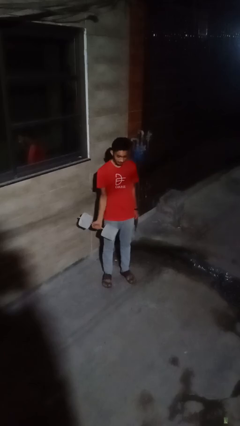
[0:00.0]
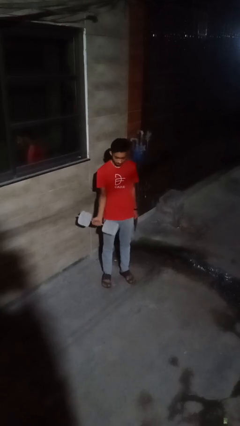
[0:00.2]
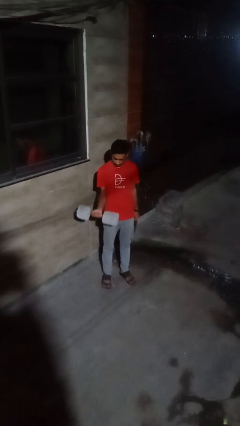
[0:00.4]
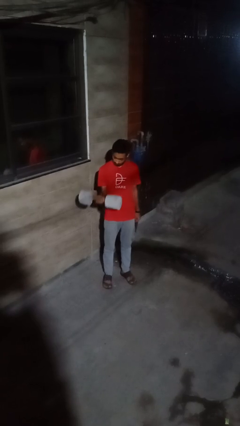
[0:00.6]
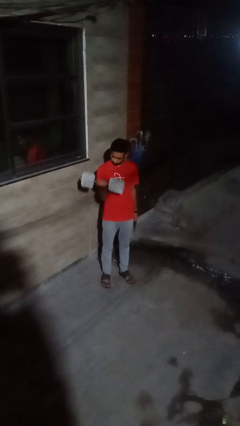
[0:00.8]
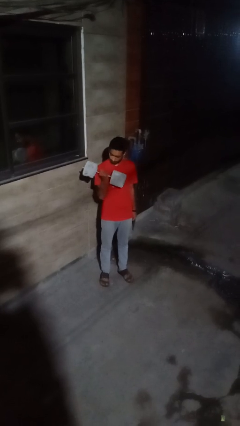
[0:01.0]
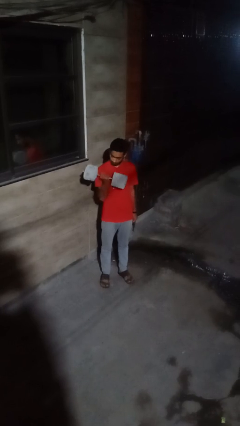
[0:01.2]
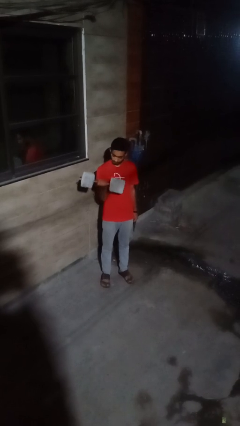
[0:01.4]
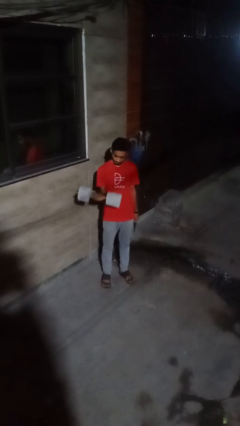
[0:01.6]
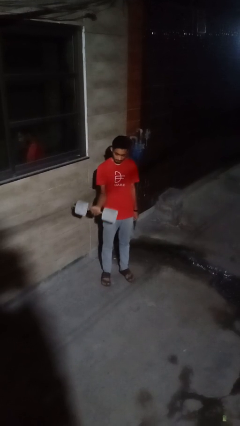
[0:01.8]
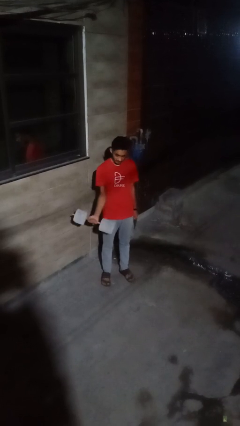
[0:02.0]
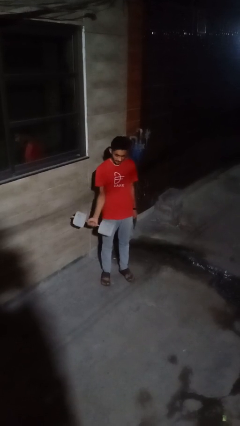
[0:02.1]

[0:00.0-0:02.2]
person lifts dumbbells

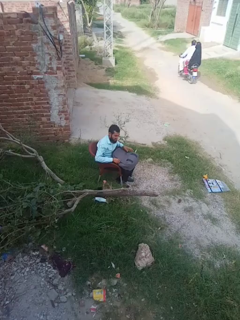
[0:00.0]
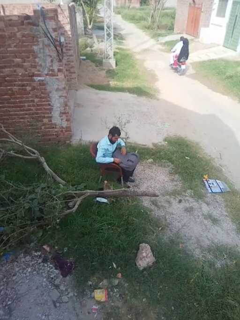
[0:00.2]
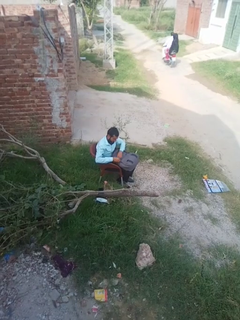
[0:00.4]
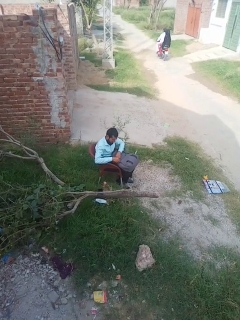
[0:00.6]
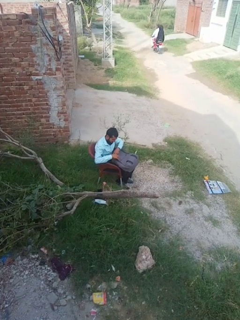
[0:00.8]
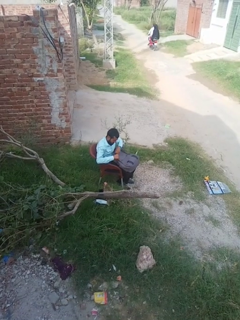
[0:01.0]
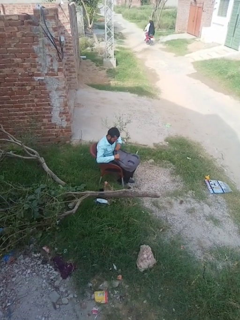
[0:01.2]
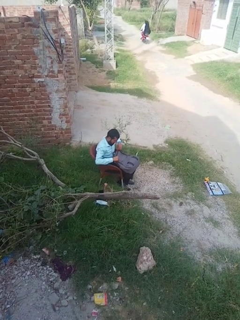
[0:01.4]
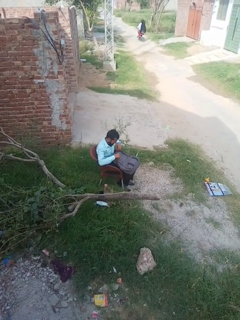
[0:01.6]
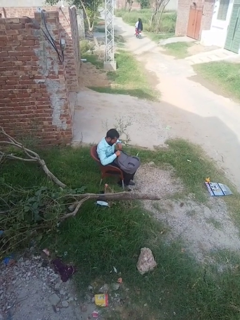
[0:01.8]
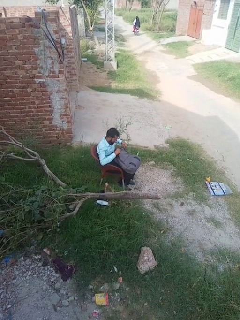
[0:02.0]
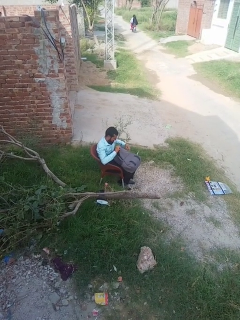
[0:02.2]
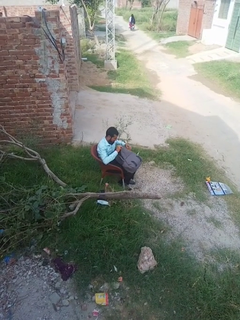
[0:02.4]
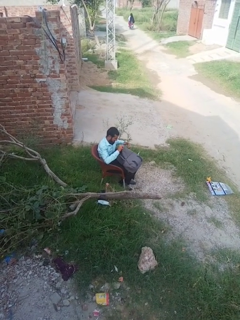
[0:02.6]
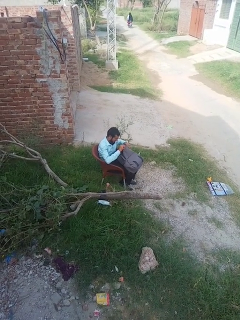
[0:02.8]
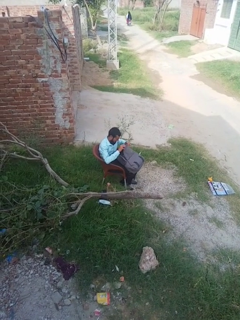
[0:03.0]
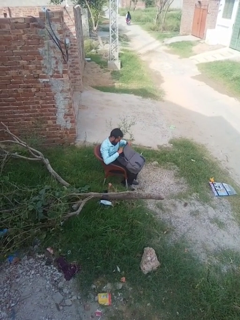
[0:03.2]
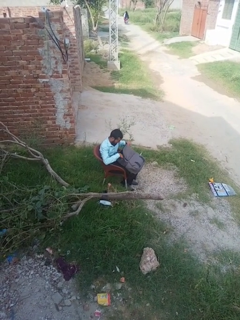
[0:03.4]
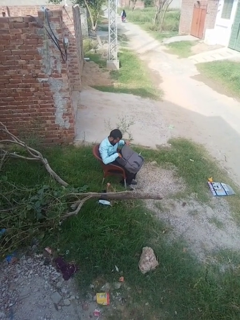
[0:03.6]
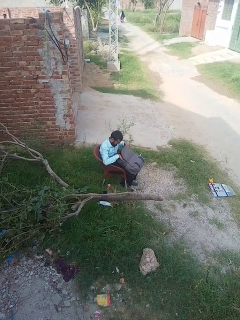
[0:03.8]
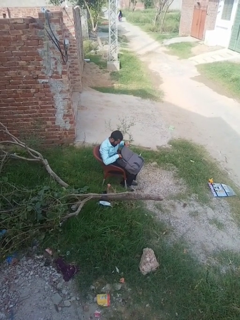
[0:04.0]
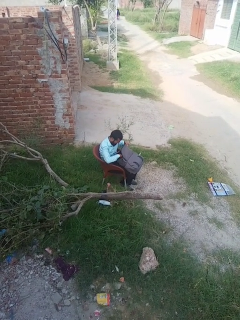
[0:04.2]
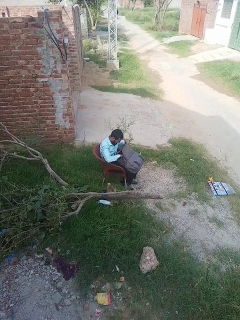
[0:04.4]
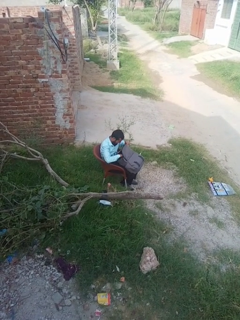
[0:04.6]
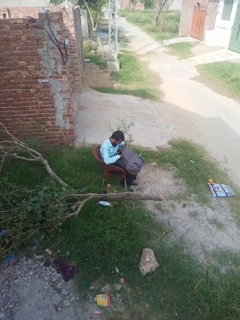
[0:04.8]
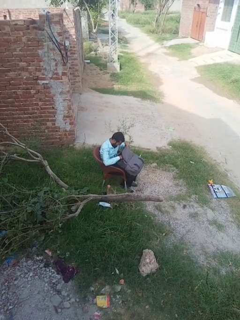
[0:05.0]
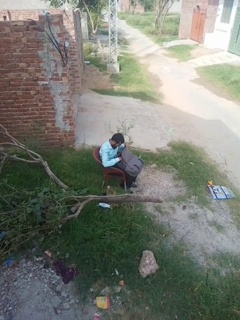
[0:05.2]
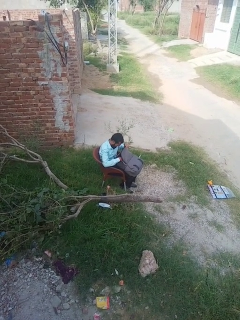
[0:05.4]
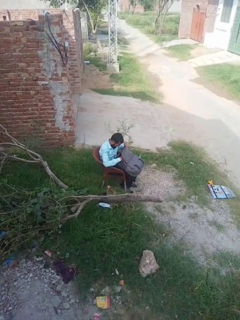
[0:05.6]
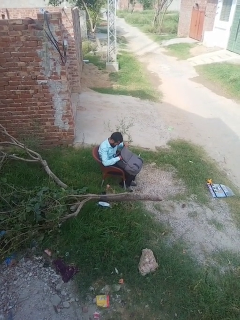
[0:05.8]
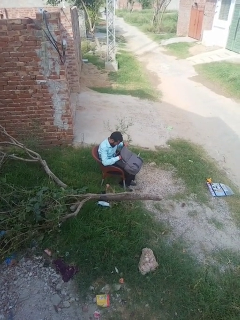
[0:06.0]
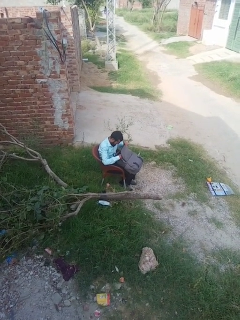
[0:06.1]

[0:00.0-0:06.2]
person searches in backpack

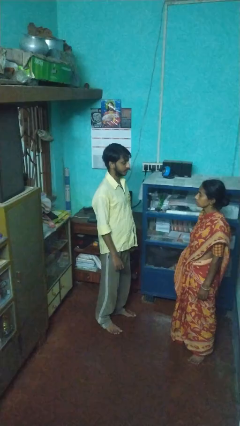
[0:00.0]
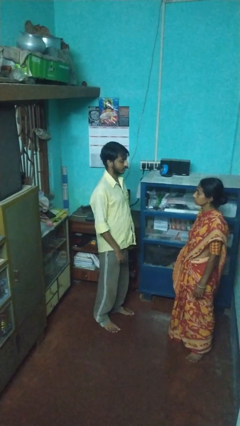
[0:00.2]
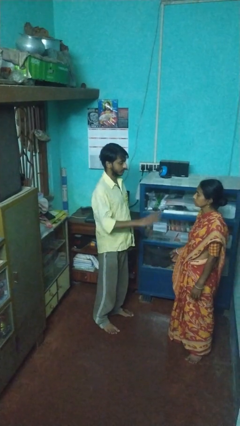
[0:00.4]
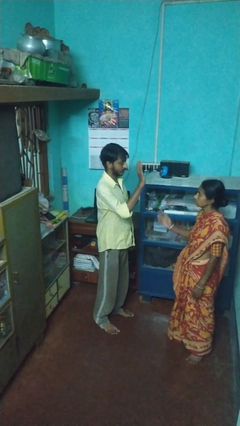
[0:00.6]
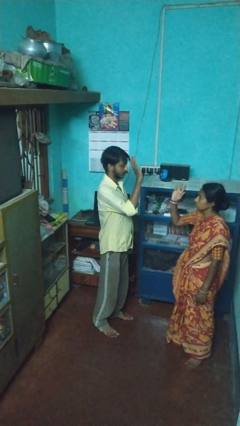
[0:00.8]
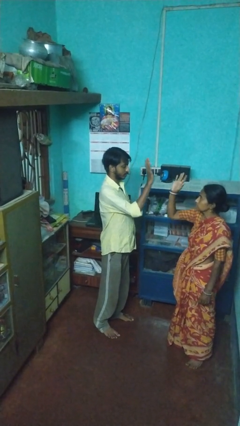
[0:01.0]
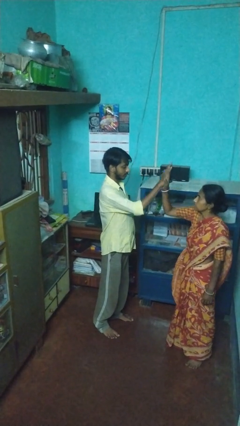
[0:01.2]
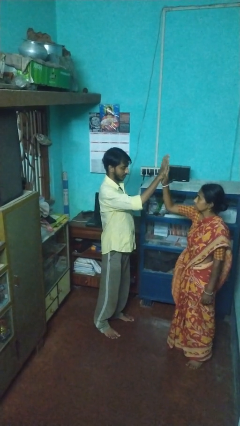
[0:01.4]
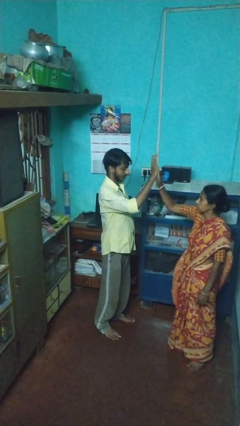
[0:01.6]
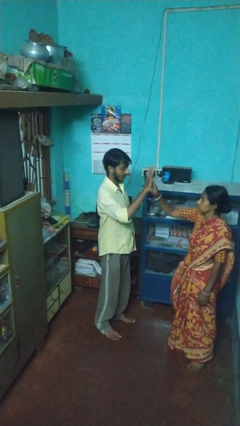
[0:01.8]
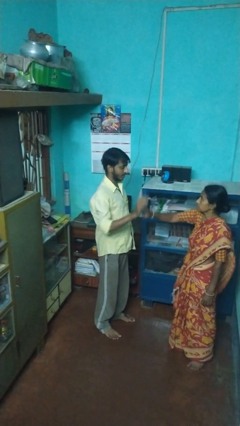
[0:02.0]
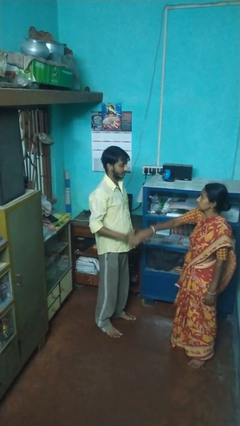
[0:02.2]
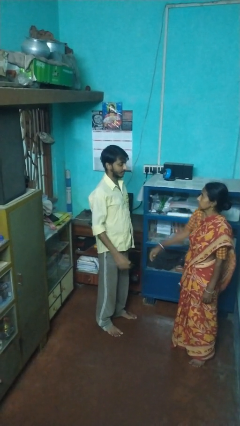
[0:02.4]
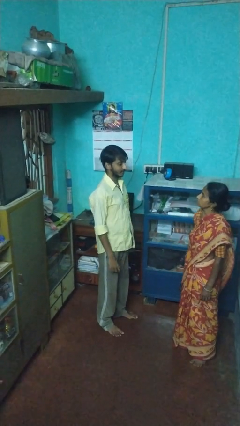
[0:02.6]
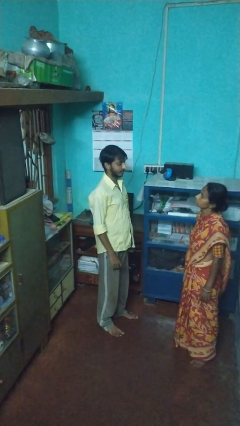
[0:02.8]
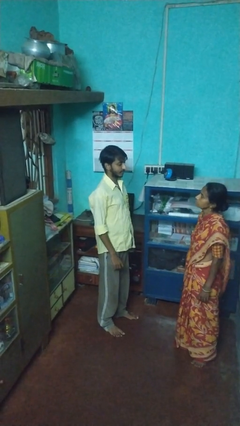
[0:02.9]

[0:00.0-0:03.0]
person highfives hand

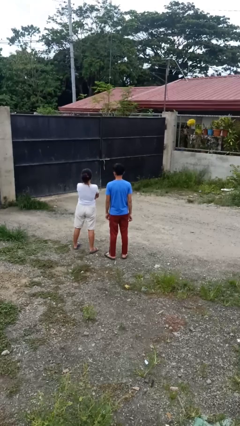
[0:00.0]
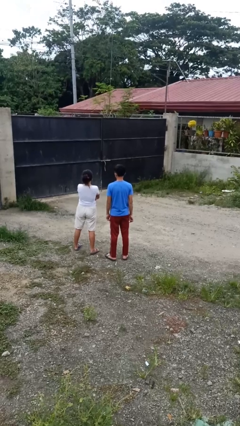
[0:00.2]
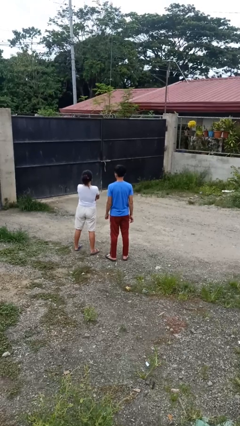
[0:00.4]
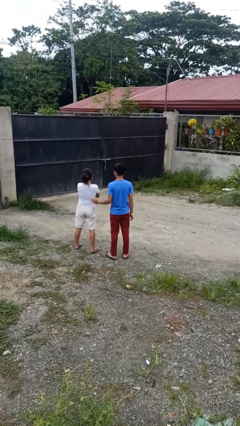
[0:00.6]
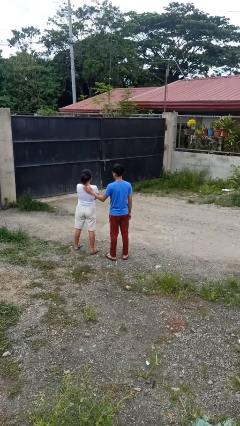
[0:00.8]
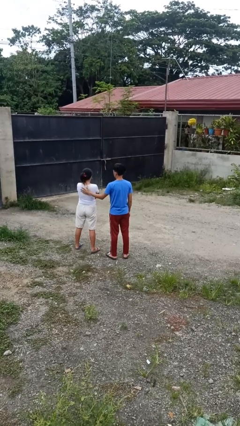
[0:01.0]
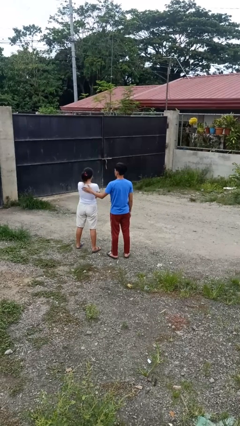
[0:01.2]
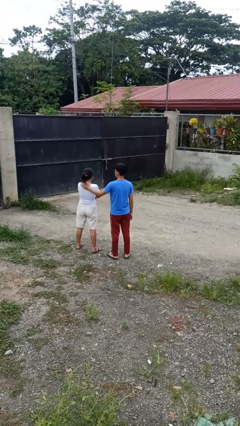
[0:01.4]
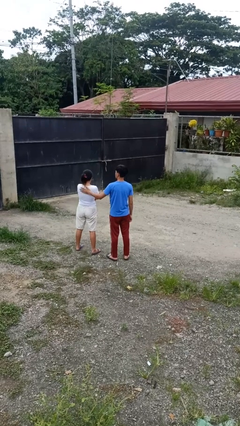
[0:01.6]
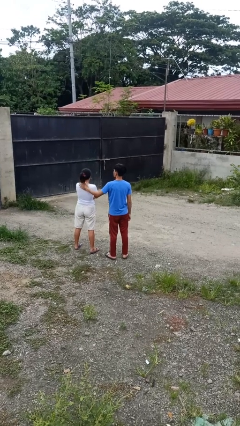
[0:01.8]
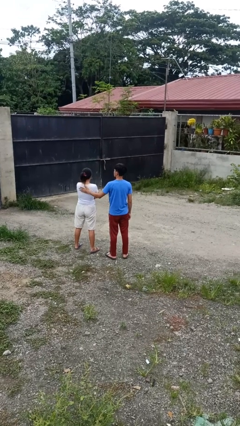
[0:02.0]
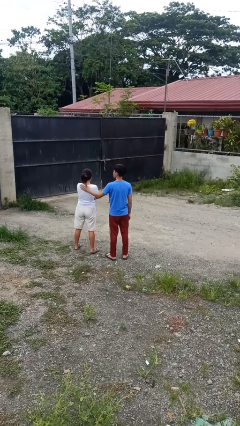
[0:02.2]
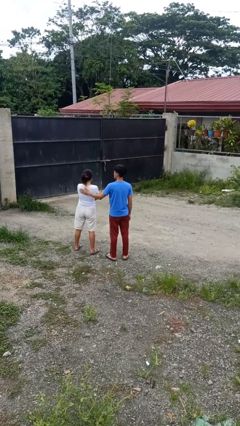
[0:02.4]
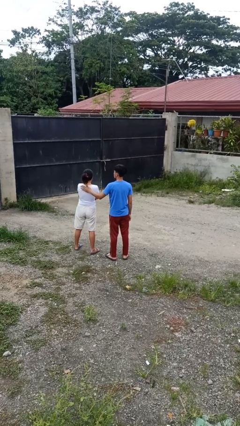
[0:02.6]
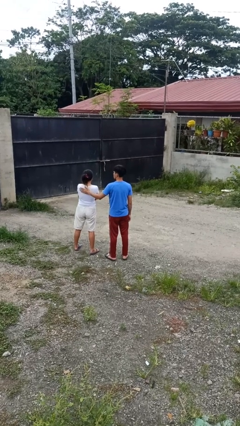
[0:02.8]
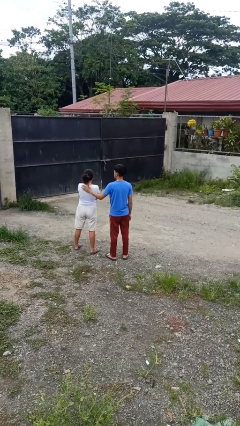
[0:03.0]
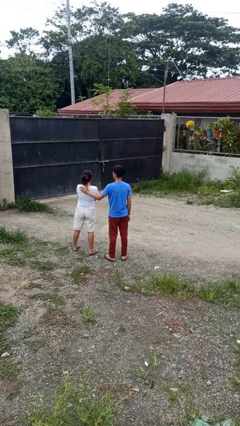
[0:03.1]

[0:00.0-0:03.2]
person touches back of person

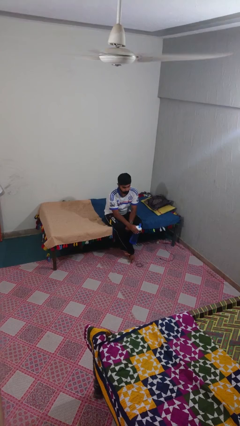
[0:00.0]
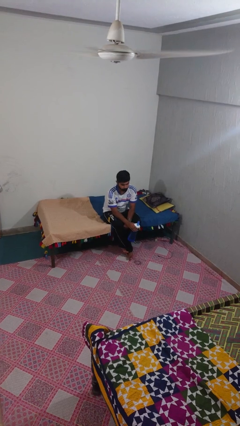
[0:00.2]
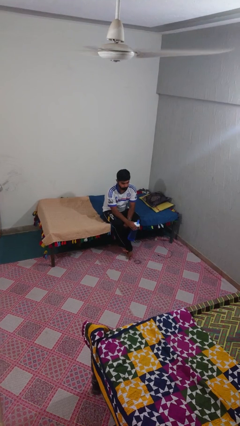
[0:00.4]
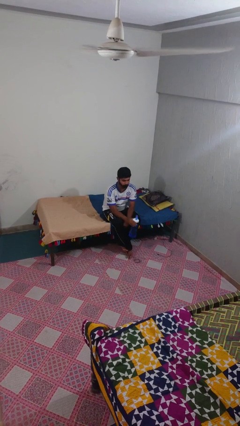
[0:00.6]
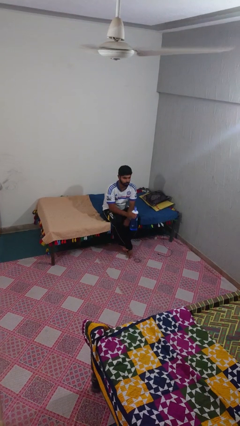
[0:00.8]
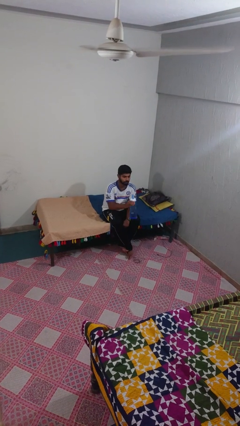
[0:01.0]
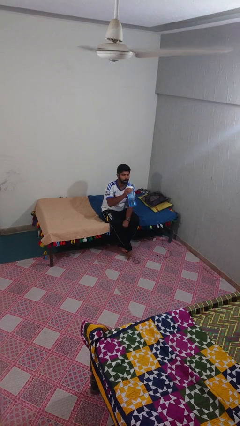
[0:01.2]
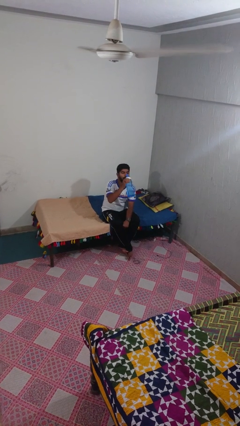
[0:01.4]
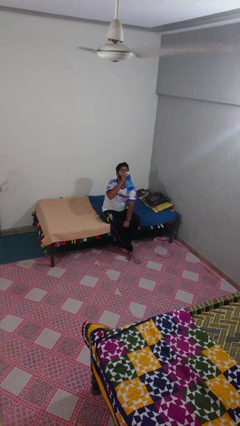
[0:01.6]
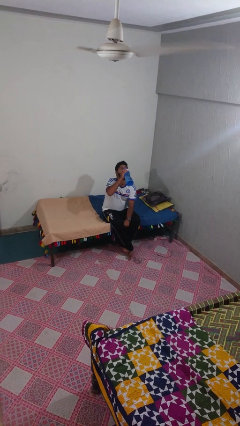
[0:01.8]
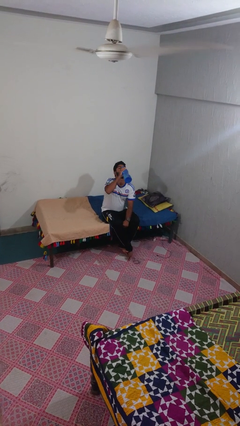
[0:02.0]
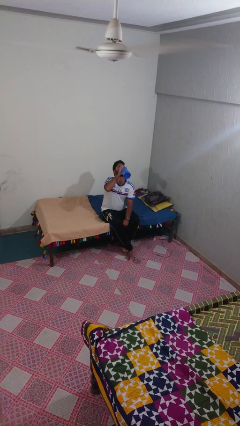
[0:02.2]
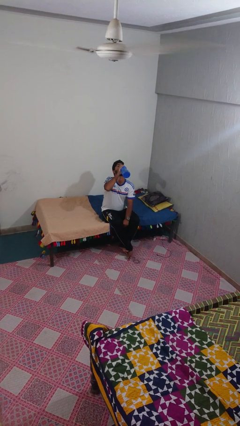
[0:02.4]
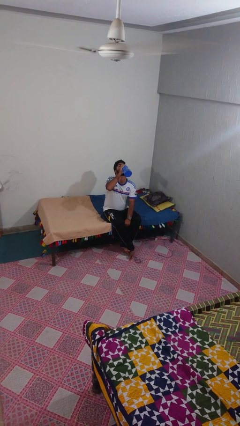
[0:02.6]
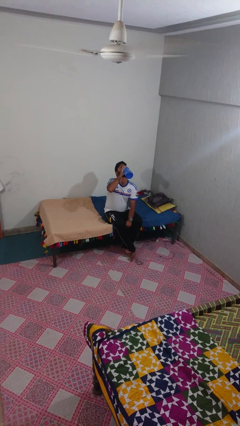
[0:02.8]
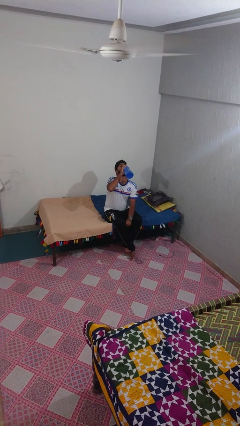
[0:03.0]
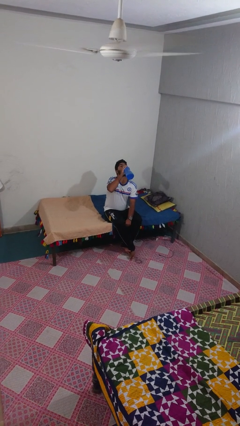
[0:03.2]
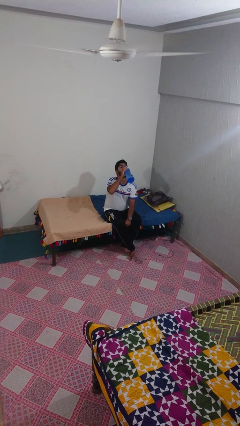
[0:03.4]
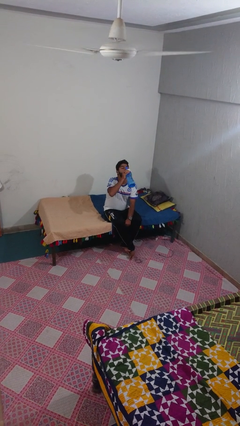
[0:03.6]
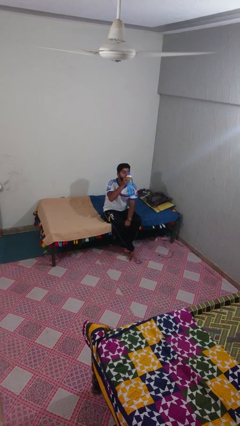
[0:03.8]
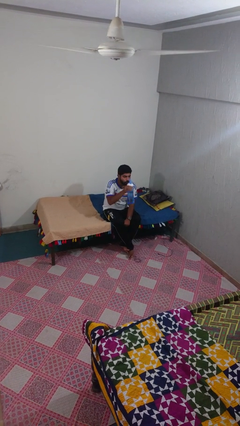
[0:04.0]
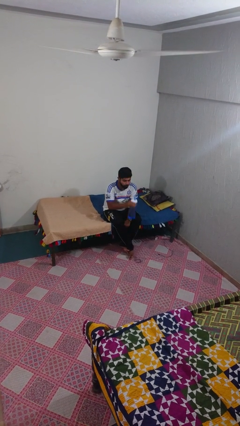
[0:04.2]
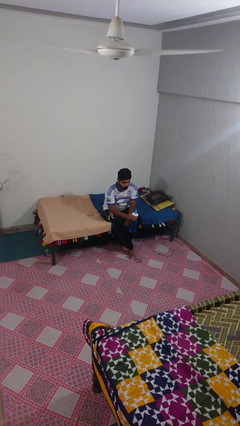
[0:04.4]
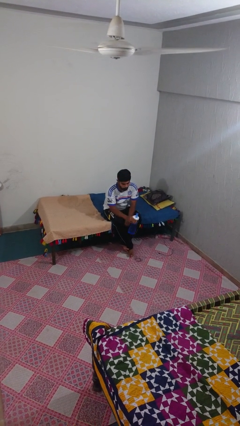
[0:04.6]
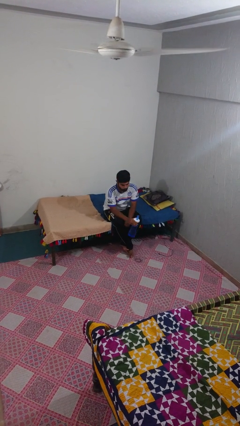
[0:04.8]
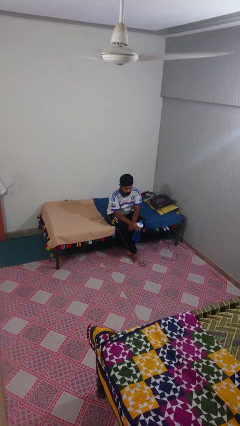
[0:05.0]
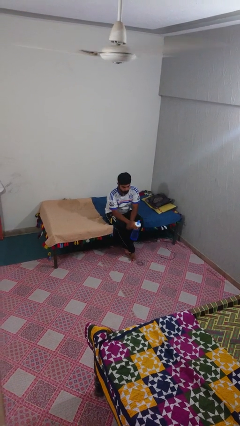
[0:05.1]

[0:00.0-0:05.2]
person drinks from bottle
